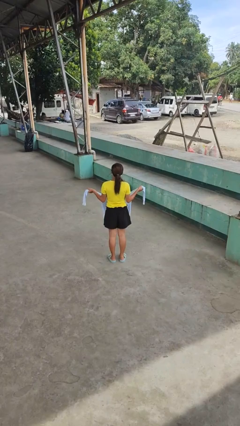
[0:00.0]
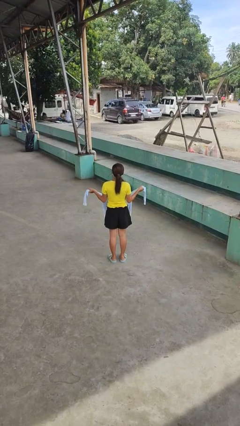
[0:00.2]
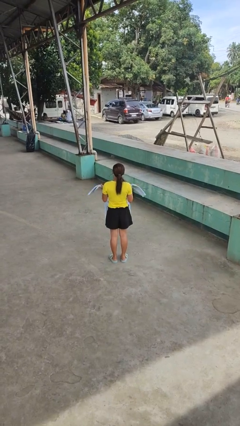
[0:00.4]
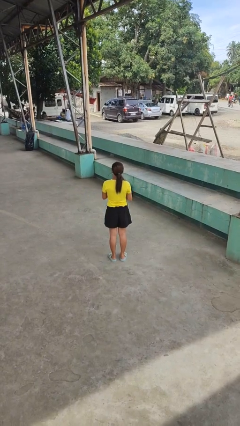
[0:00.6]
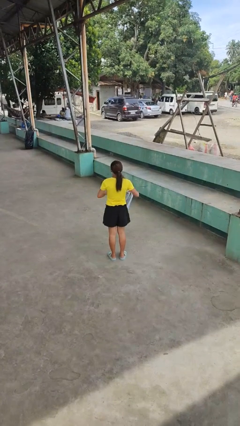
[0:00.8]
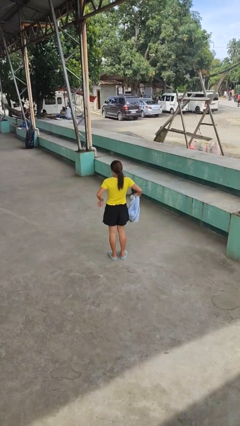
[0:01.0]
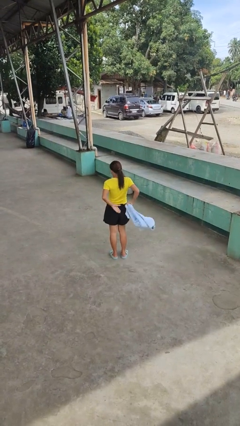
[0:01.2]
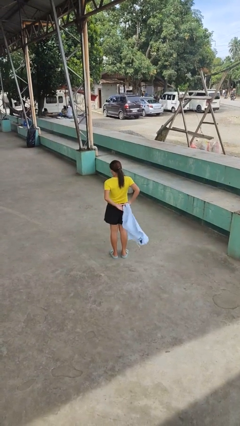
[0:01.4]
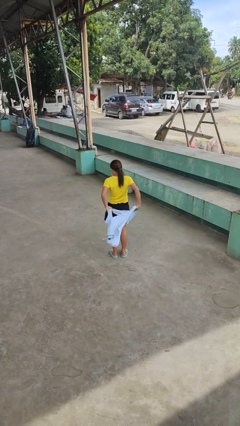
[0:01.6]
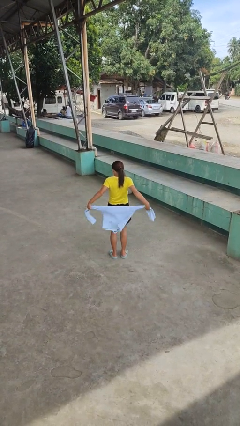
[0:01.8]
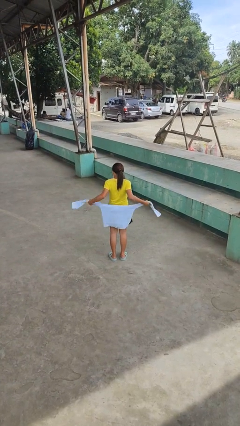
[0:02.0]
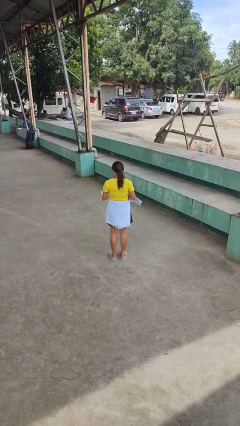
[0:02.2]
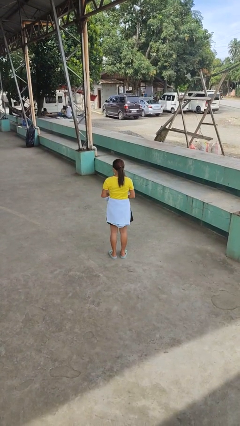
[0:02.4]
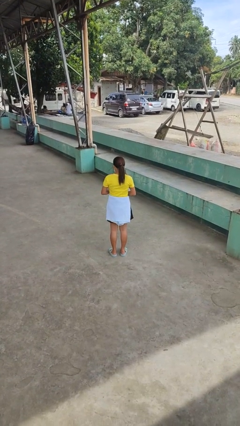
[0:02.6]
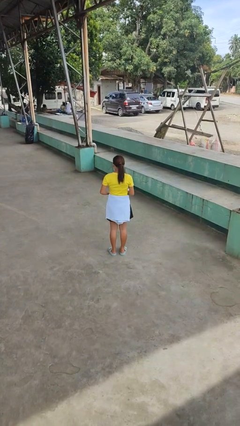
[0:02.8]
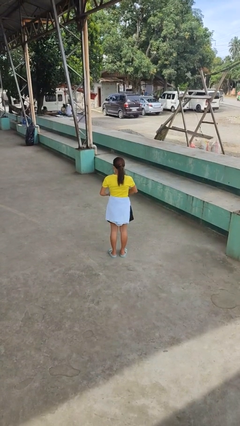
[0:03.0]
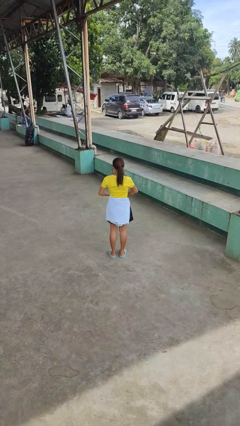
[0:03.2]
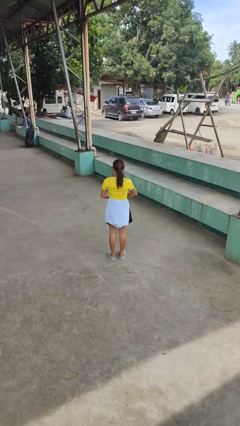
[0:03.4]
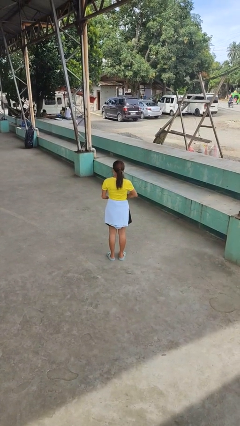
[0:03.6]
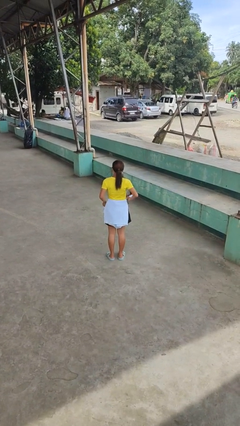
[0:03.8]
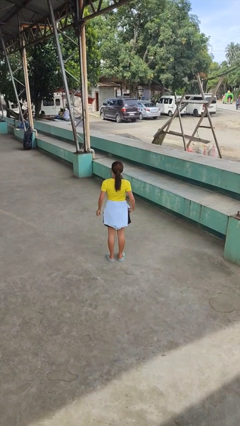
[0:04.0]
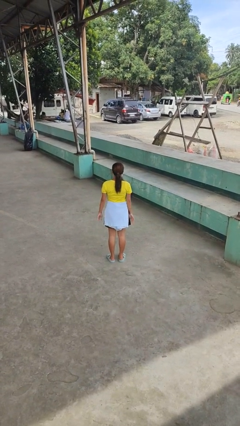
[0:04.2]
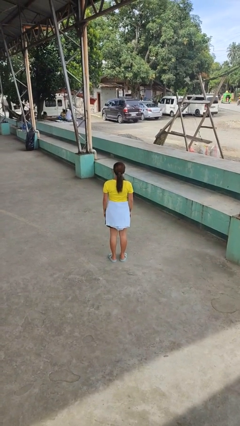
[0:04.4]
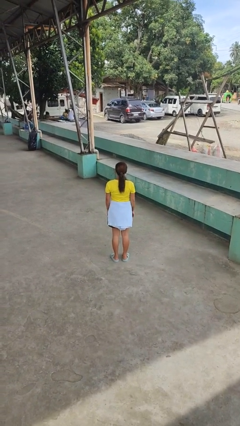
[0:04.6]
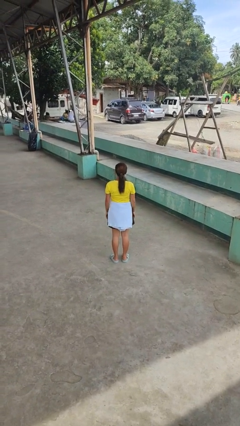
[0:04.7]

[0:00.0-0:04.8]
person ties jacket around waist

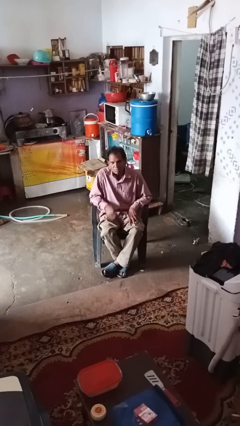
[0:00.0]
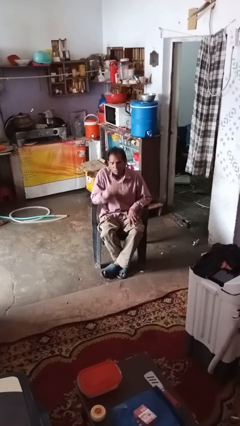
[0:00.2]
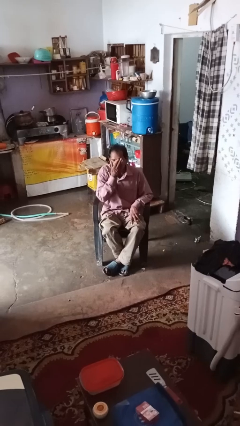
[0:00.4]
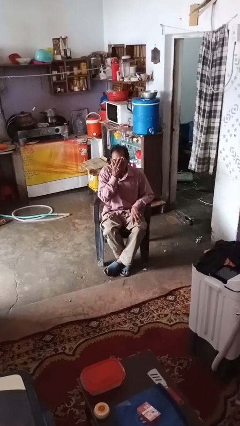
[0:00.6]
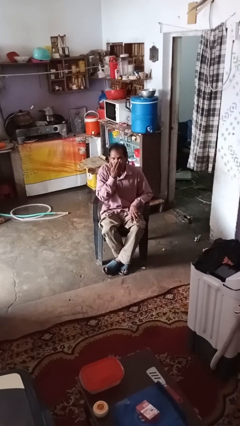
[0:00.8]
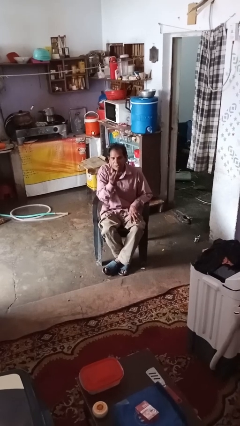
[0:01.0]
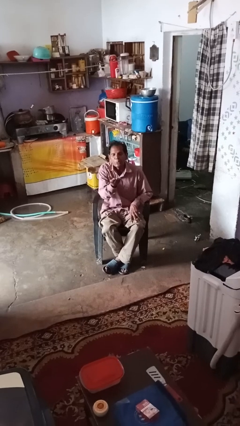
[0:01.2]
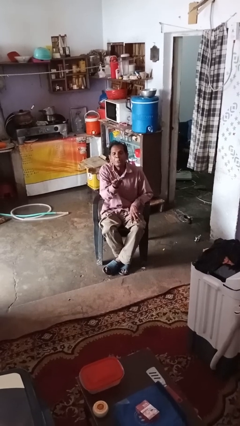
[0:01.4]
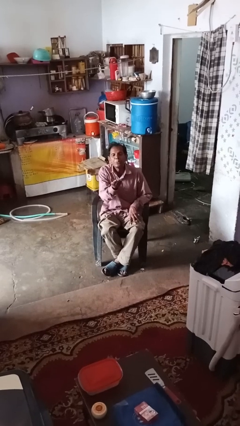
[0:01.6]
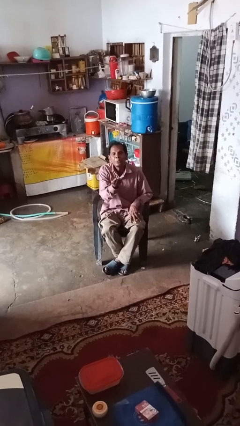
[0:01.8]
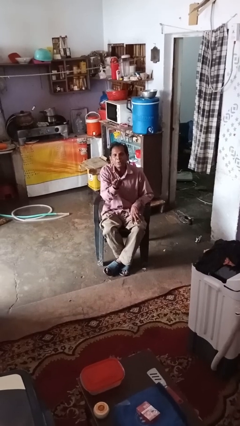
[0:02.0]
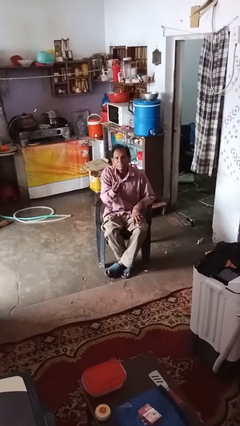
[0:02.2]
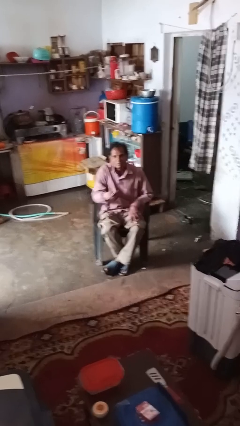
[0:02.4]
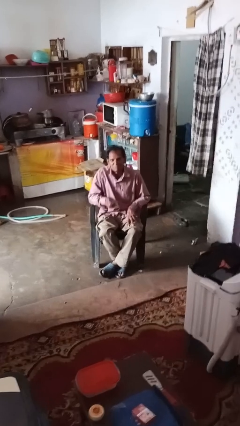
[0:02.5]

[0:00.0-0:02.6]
person gestures blow kiss

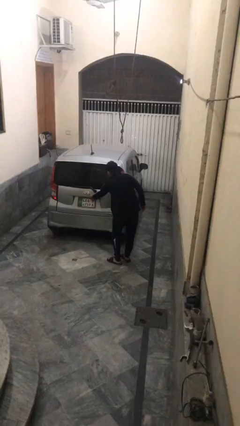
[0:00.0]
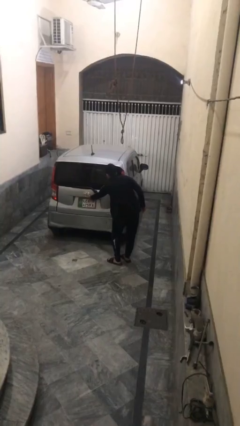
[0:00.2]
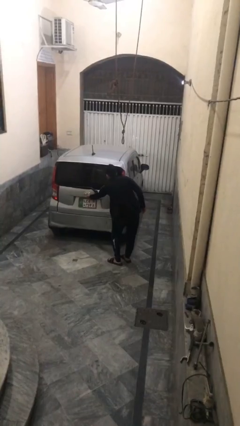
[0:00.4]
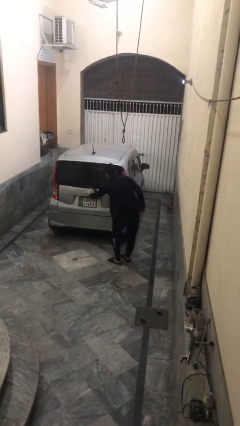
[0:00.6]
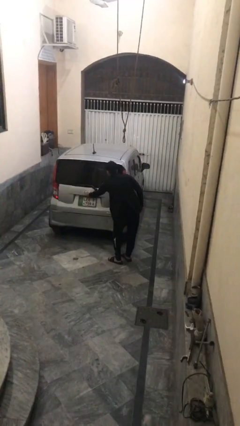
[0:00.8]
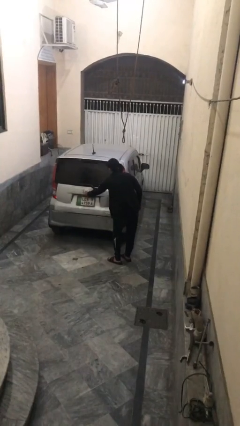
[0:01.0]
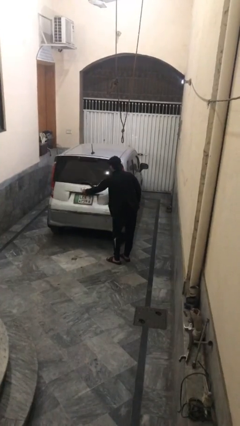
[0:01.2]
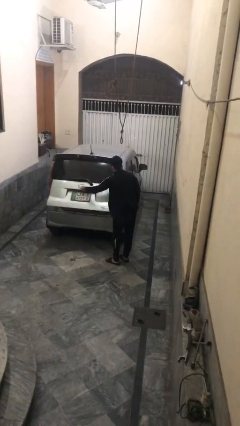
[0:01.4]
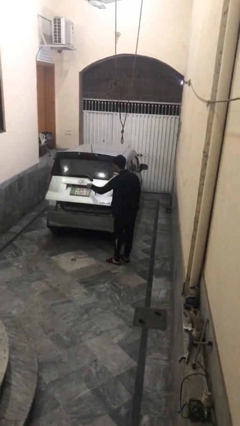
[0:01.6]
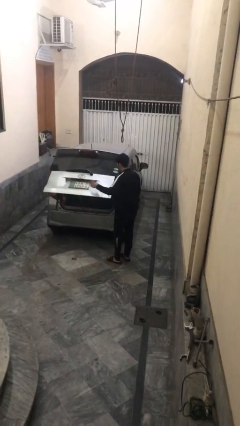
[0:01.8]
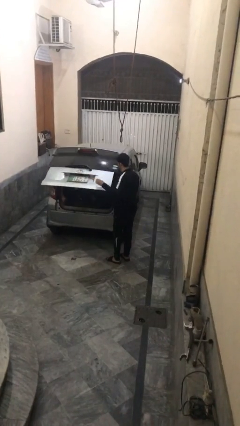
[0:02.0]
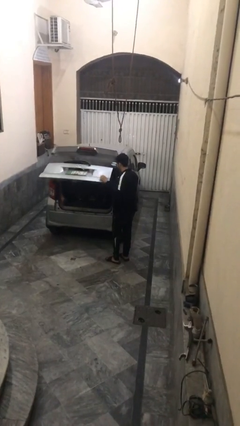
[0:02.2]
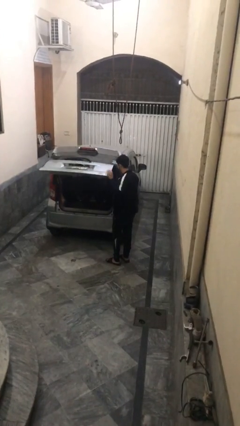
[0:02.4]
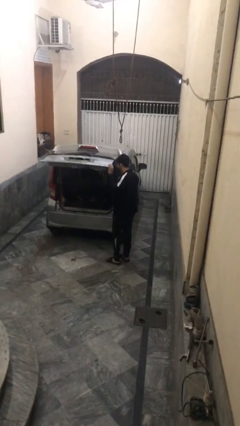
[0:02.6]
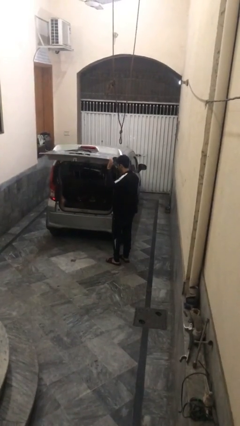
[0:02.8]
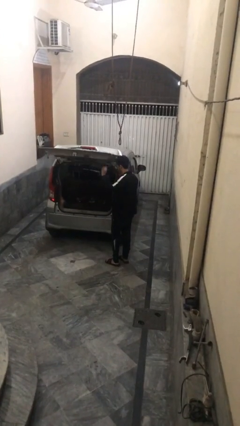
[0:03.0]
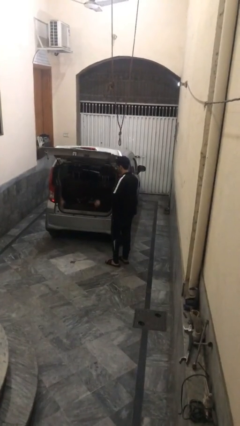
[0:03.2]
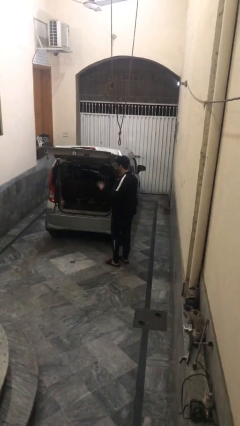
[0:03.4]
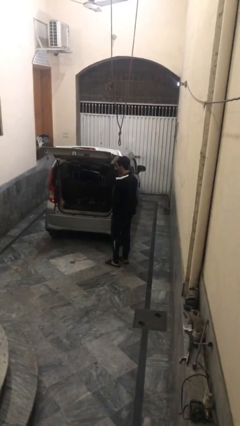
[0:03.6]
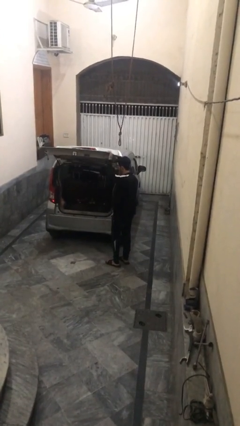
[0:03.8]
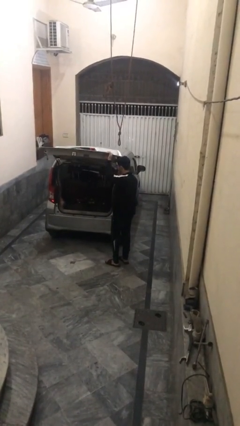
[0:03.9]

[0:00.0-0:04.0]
person opens car trunk

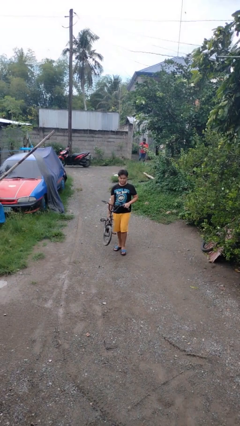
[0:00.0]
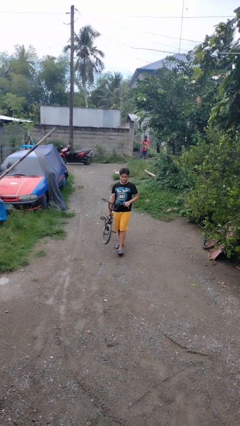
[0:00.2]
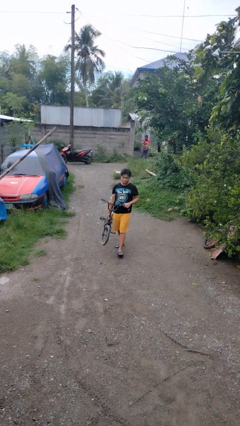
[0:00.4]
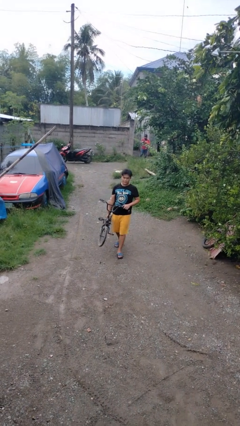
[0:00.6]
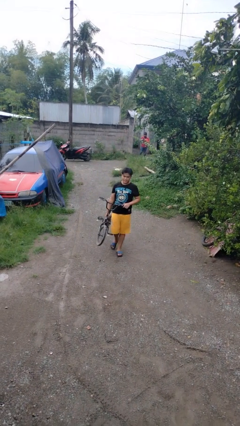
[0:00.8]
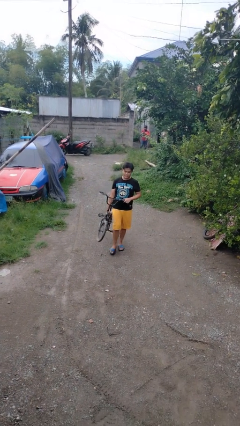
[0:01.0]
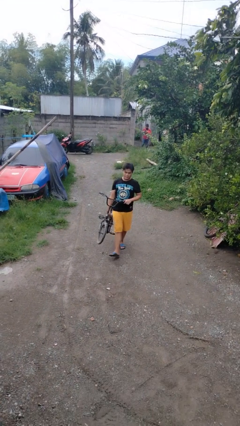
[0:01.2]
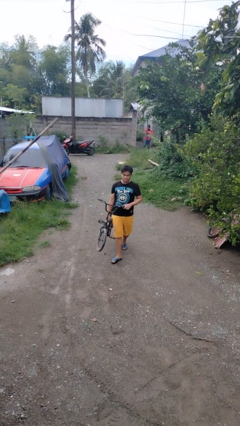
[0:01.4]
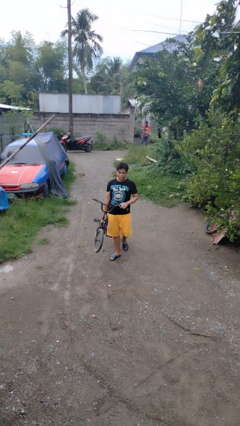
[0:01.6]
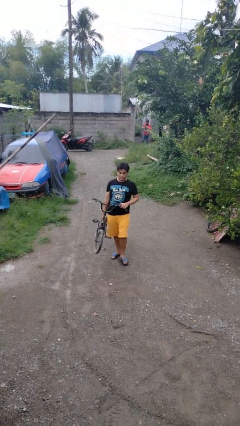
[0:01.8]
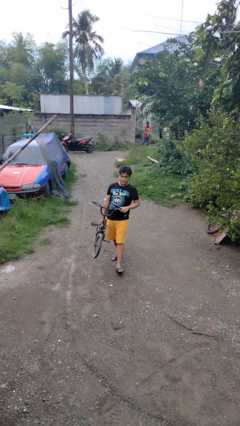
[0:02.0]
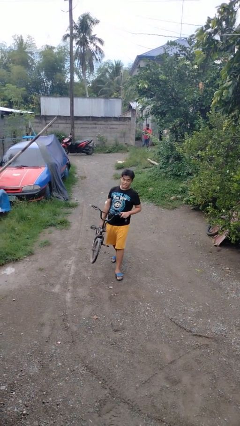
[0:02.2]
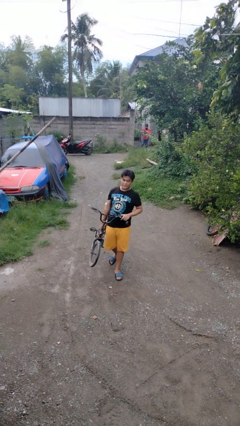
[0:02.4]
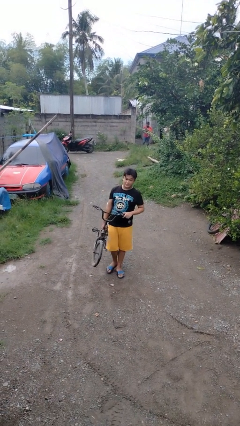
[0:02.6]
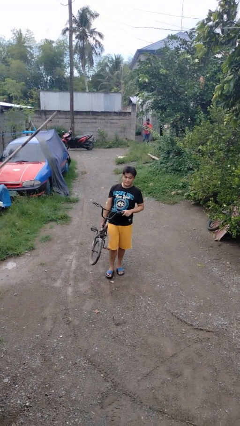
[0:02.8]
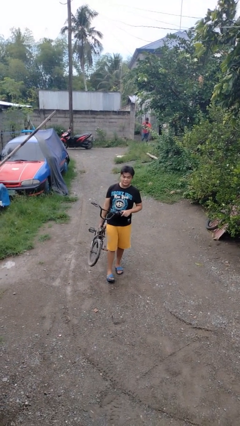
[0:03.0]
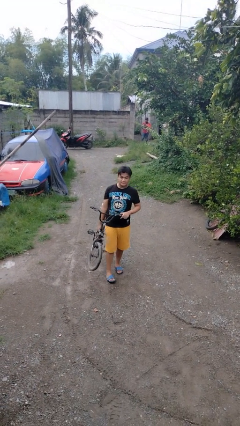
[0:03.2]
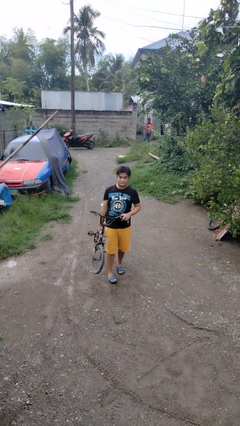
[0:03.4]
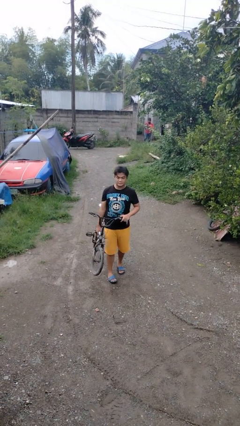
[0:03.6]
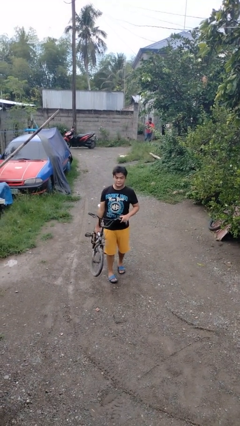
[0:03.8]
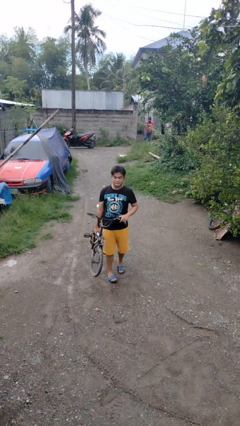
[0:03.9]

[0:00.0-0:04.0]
person carries bicycle

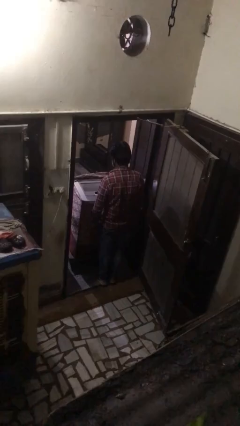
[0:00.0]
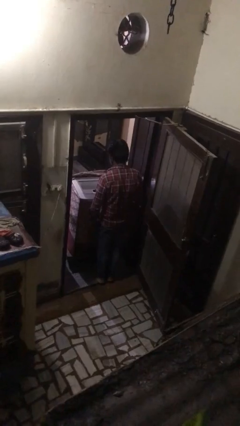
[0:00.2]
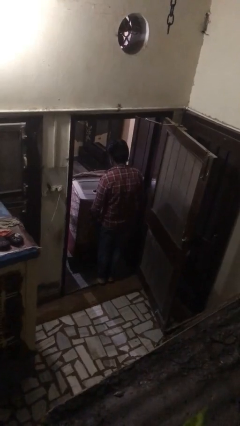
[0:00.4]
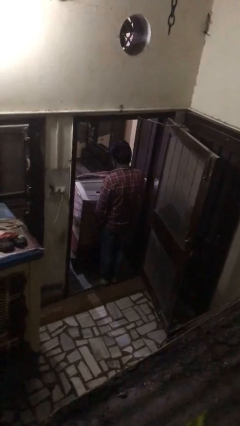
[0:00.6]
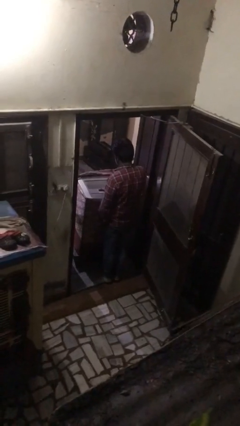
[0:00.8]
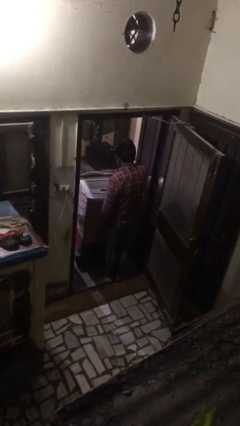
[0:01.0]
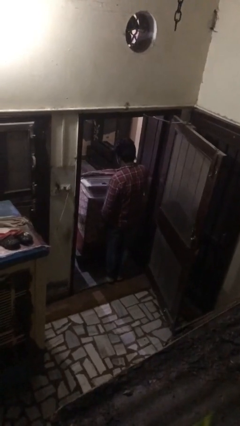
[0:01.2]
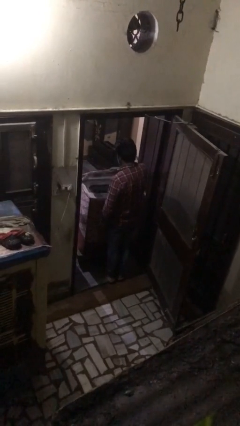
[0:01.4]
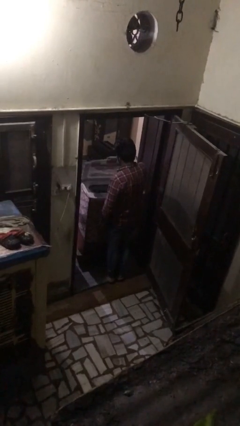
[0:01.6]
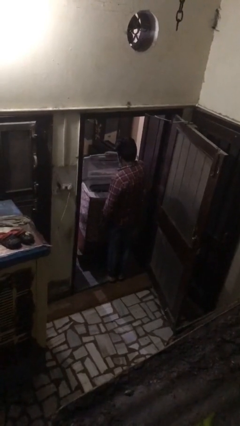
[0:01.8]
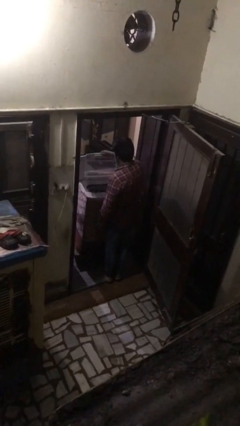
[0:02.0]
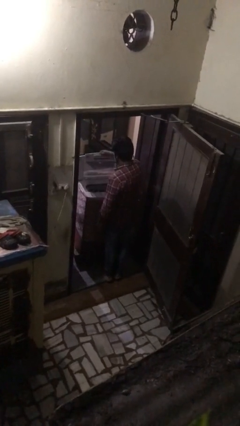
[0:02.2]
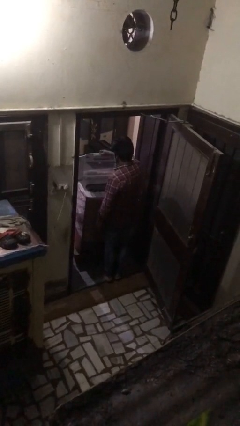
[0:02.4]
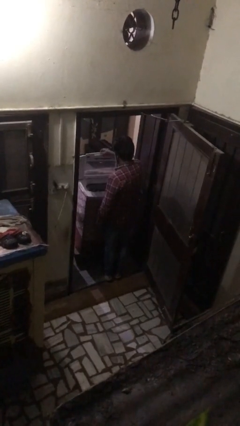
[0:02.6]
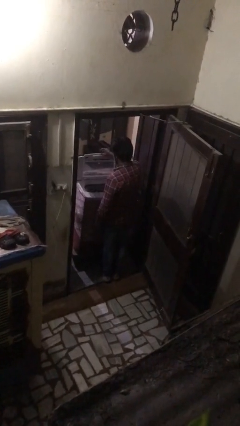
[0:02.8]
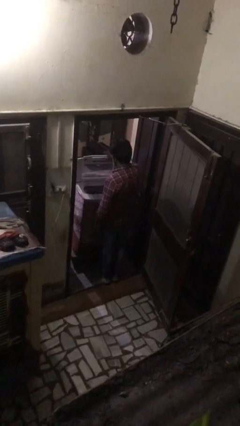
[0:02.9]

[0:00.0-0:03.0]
person opens clothes washer
